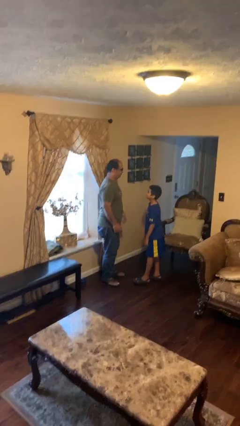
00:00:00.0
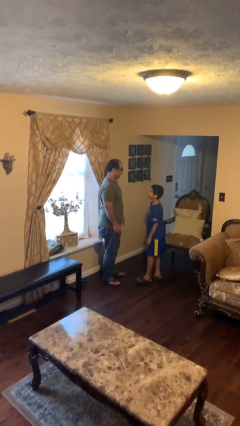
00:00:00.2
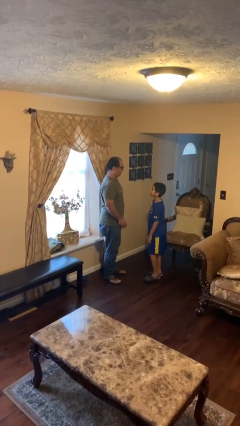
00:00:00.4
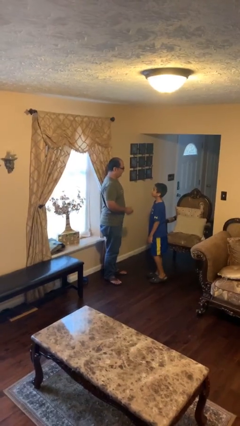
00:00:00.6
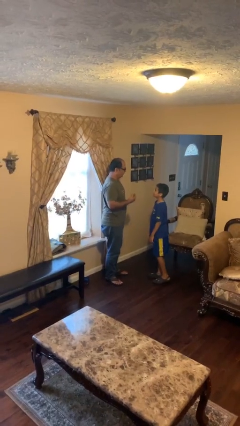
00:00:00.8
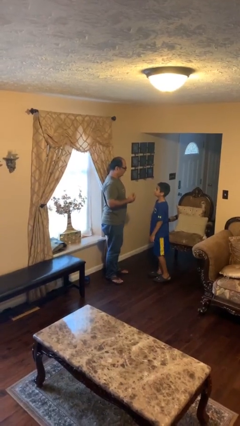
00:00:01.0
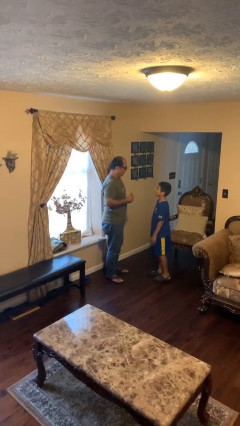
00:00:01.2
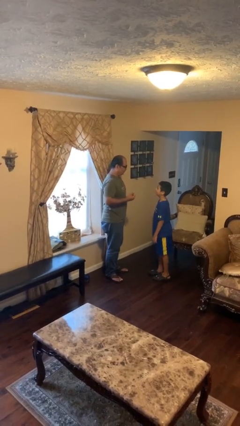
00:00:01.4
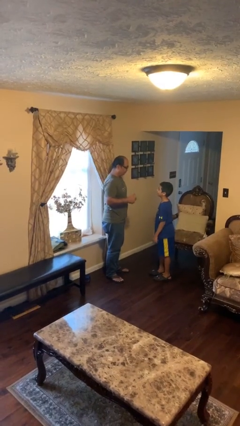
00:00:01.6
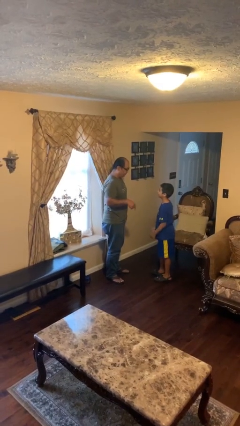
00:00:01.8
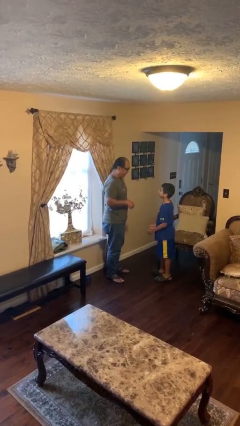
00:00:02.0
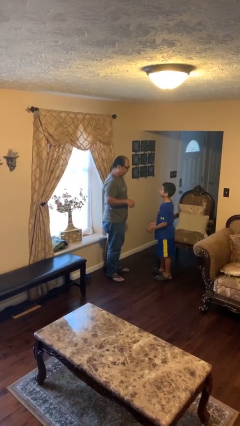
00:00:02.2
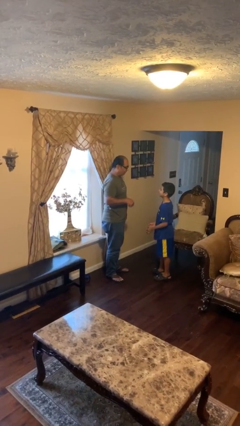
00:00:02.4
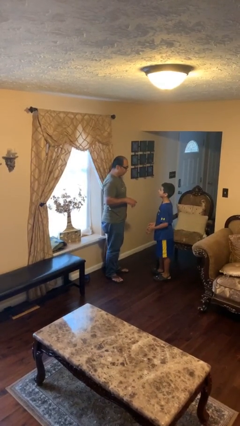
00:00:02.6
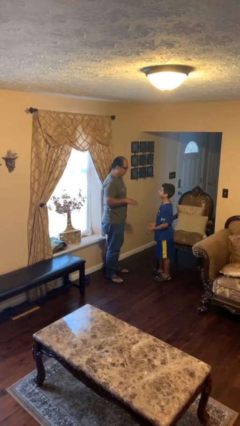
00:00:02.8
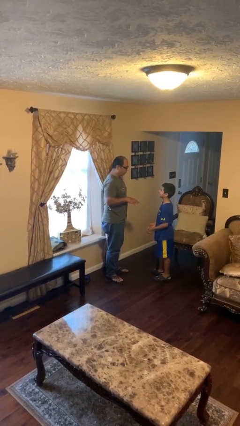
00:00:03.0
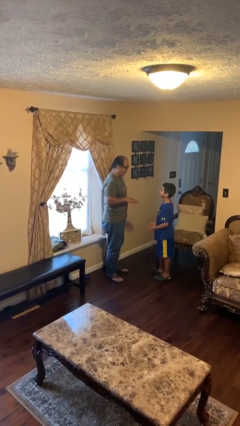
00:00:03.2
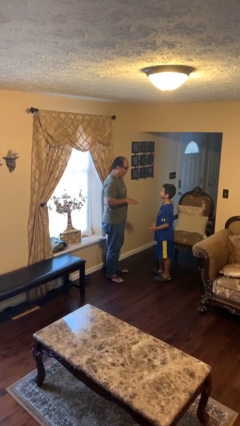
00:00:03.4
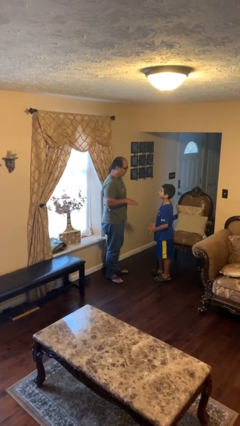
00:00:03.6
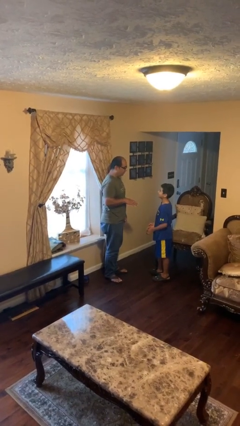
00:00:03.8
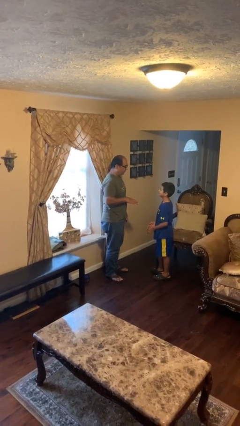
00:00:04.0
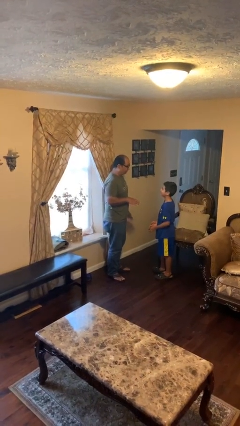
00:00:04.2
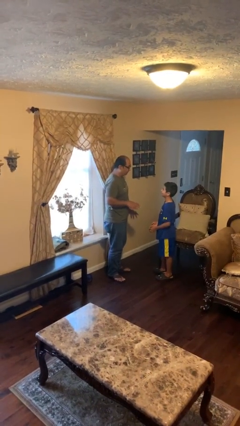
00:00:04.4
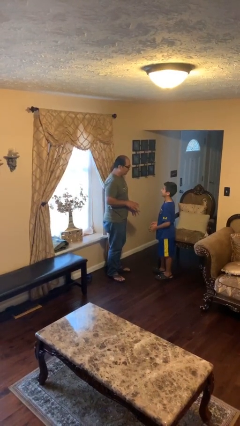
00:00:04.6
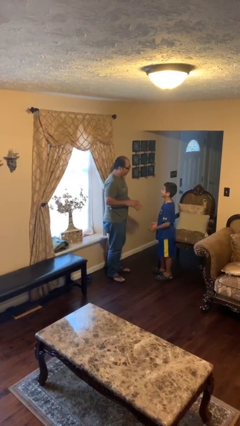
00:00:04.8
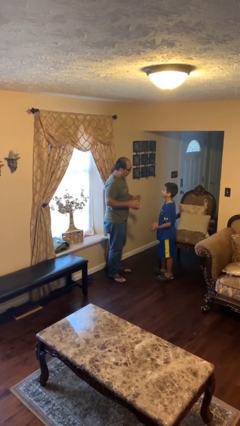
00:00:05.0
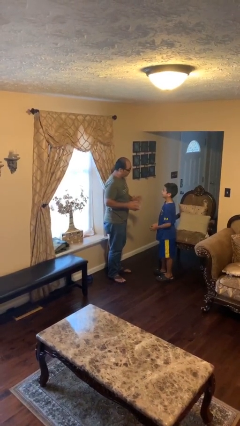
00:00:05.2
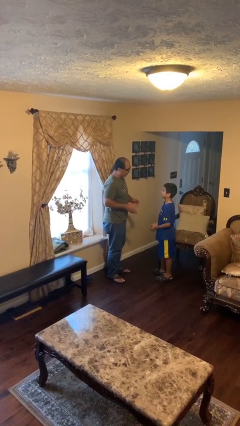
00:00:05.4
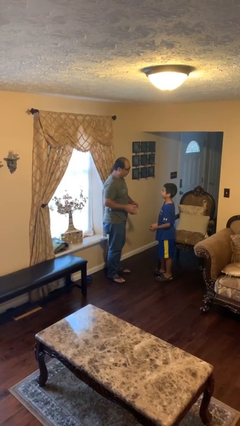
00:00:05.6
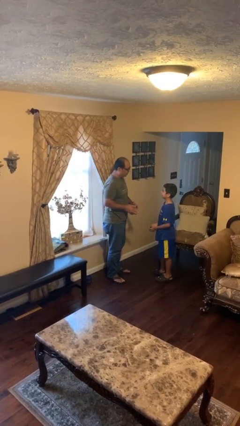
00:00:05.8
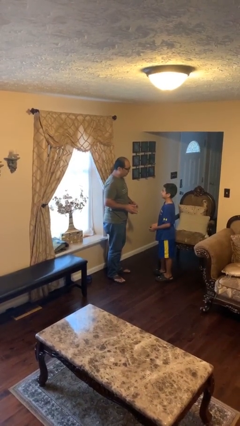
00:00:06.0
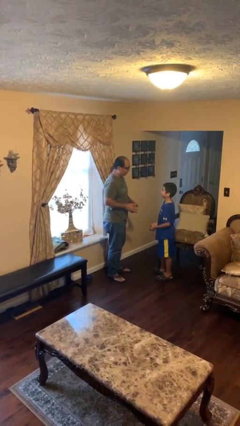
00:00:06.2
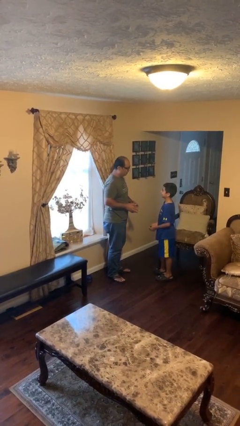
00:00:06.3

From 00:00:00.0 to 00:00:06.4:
person talks to person

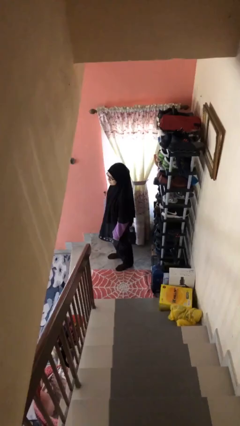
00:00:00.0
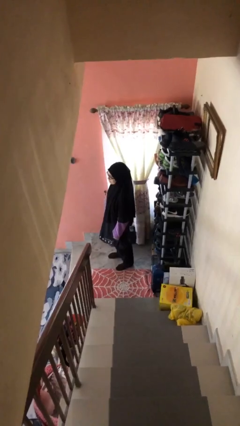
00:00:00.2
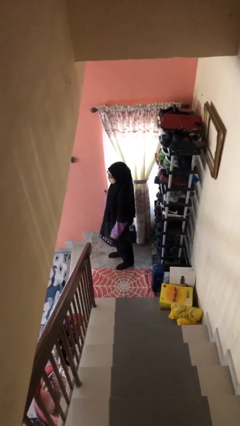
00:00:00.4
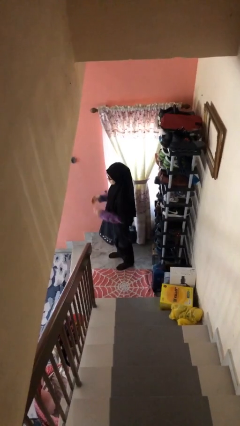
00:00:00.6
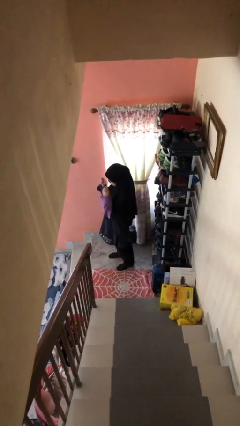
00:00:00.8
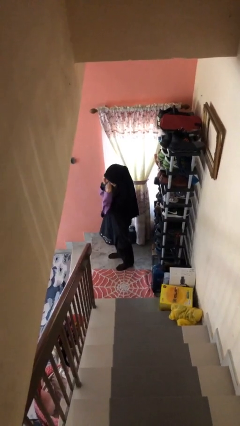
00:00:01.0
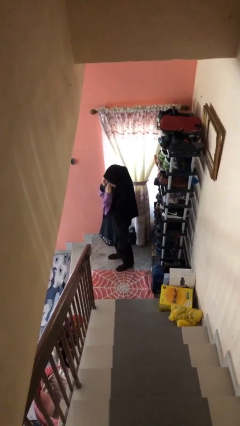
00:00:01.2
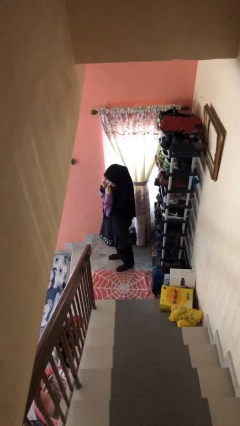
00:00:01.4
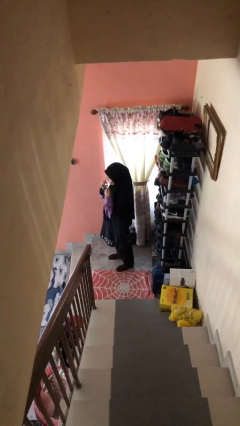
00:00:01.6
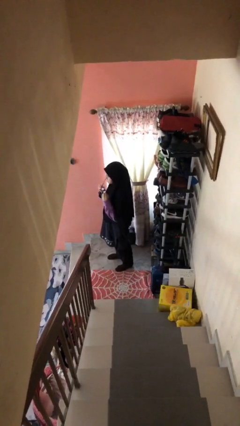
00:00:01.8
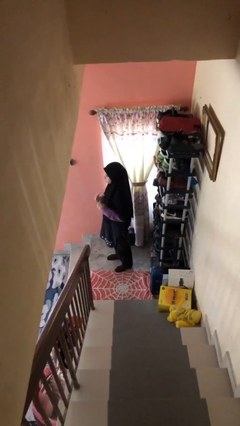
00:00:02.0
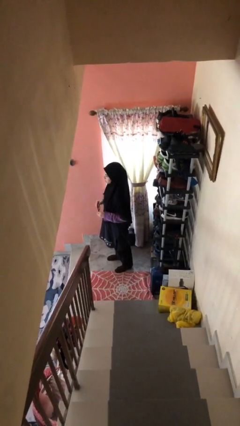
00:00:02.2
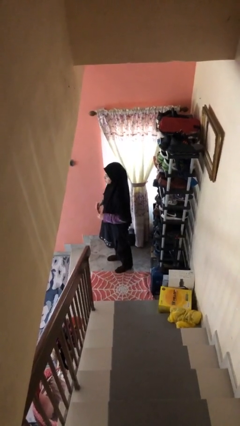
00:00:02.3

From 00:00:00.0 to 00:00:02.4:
person takes off glasses

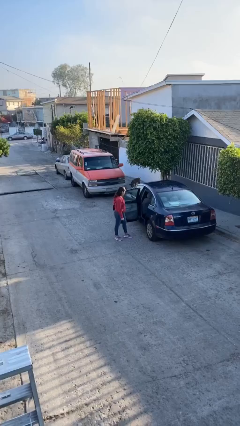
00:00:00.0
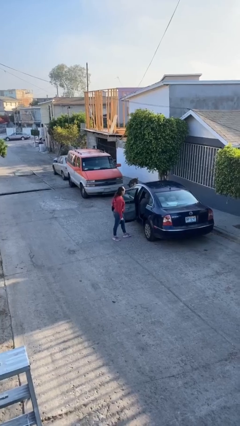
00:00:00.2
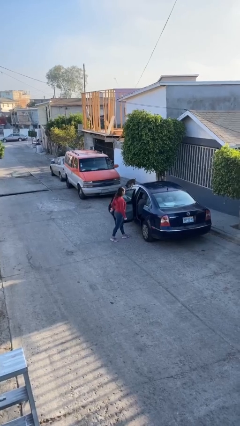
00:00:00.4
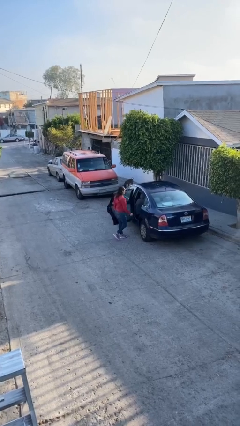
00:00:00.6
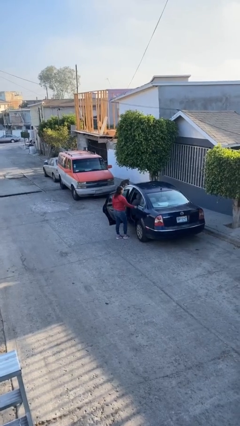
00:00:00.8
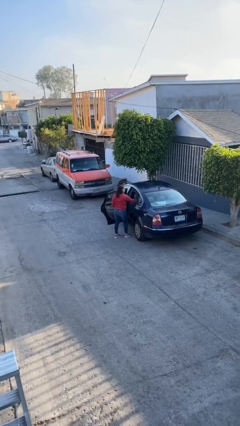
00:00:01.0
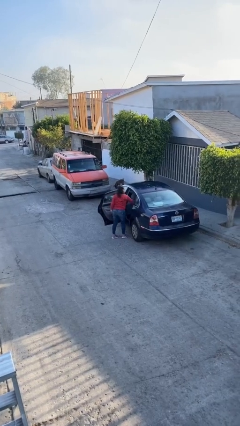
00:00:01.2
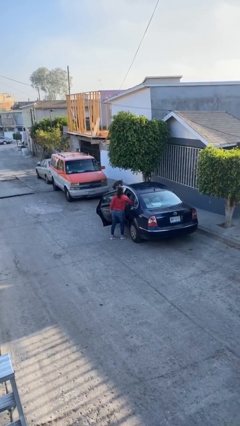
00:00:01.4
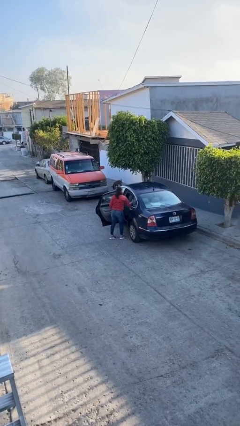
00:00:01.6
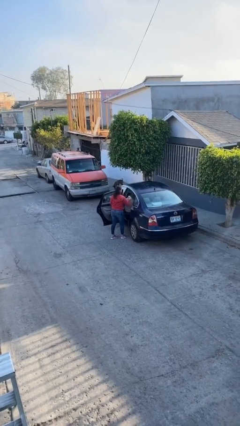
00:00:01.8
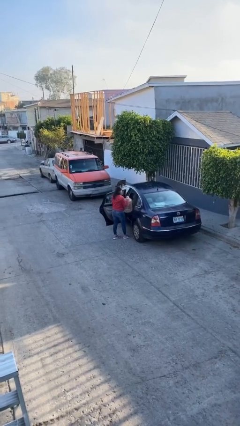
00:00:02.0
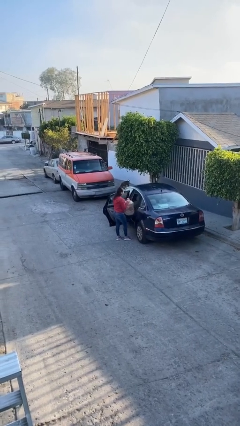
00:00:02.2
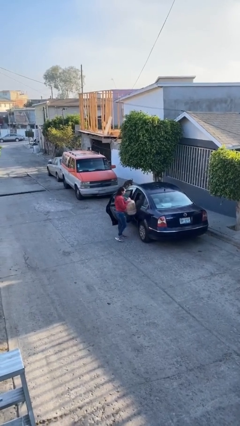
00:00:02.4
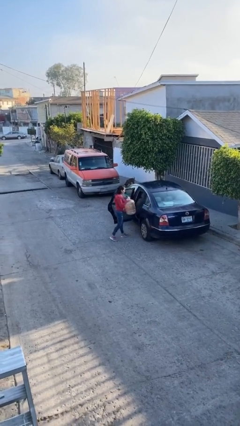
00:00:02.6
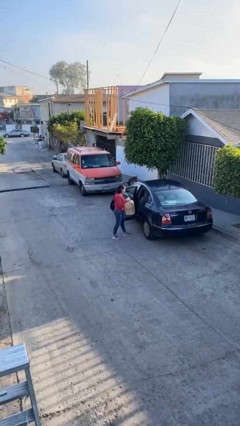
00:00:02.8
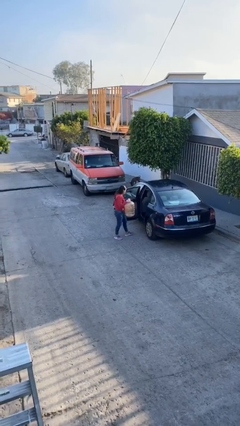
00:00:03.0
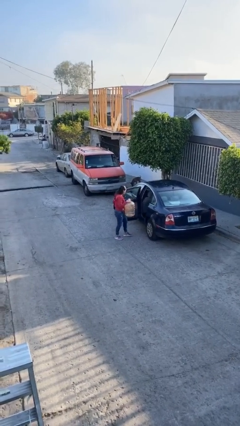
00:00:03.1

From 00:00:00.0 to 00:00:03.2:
person unloads car

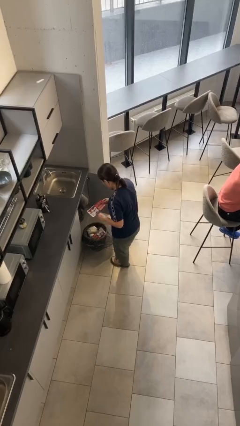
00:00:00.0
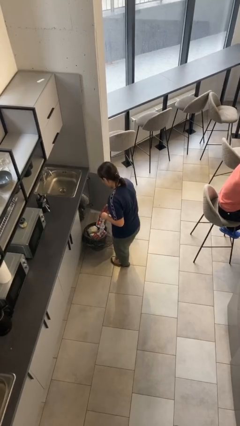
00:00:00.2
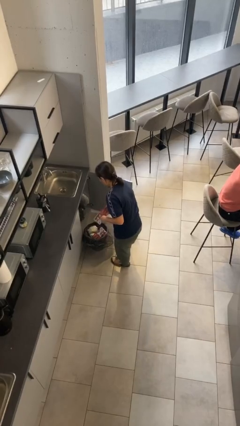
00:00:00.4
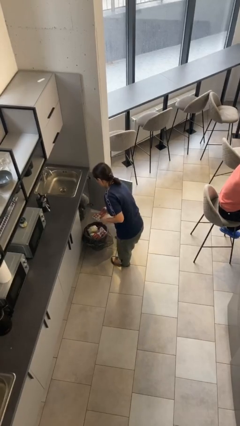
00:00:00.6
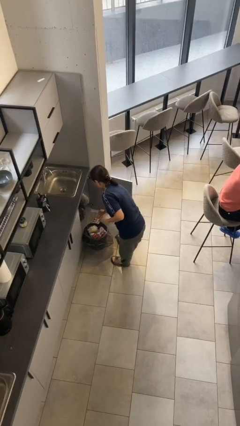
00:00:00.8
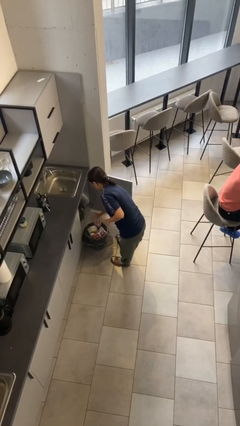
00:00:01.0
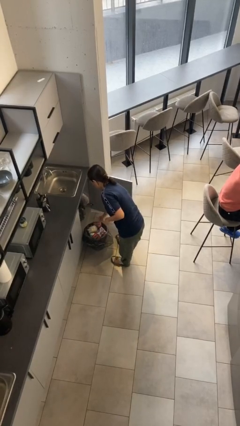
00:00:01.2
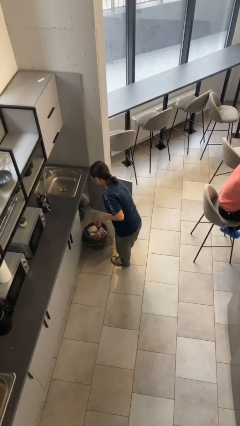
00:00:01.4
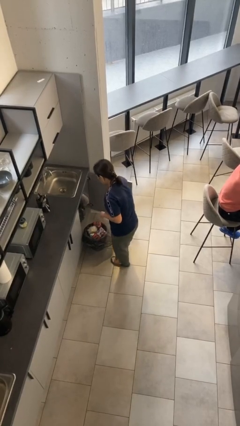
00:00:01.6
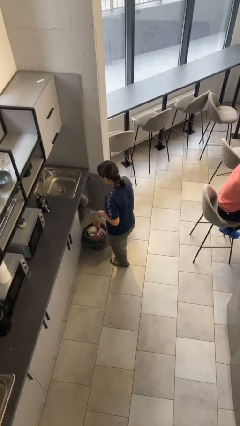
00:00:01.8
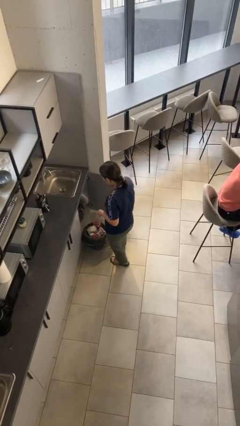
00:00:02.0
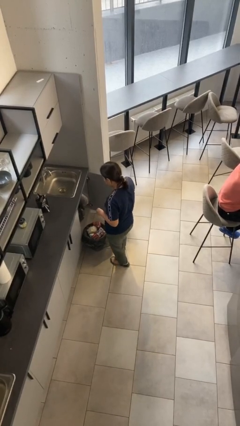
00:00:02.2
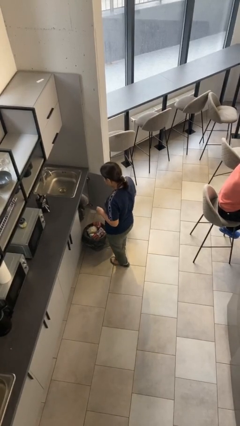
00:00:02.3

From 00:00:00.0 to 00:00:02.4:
person discards trash

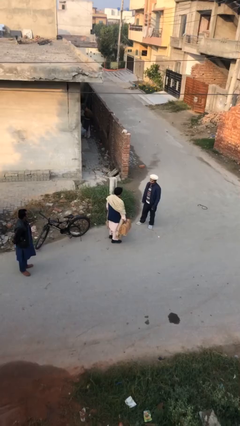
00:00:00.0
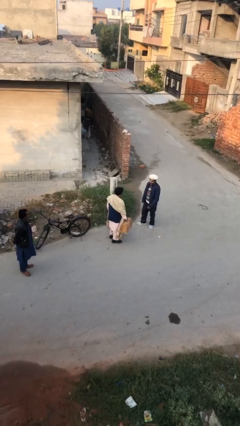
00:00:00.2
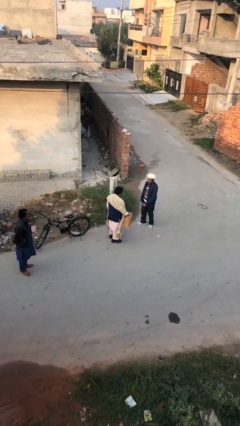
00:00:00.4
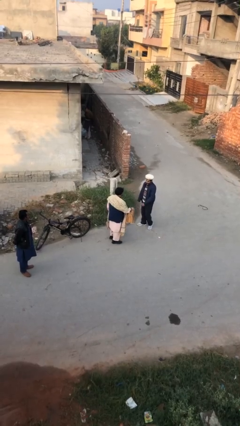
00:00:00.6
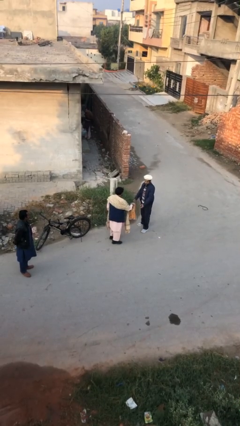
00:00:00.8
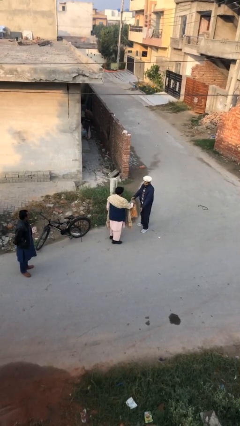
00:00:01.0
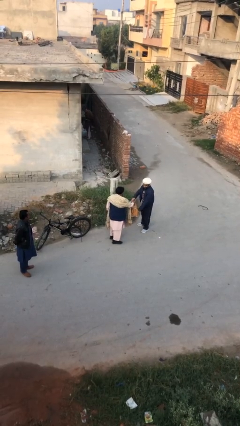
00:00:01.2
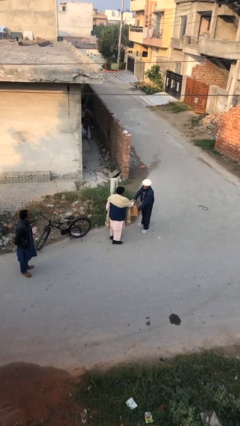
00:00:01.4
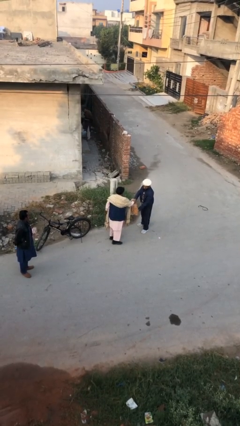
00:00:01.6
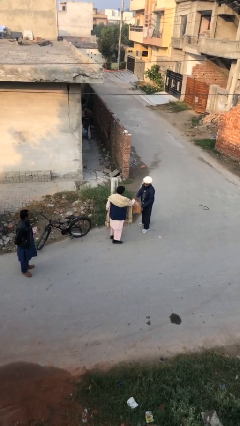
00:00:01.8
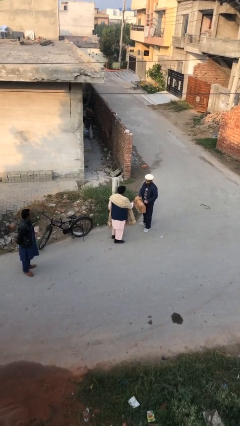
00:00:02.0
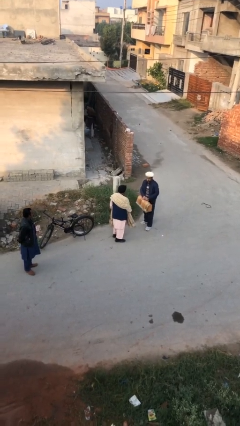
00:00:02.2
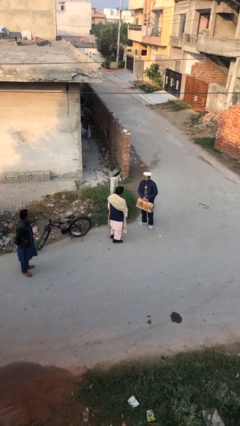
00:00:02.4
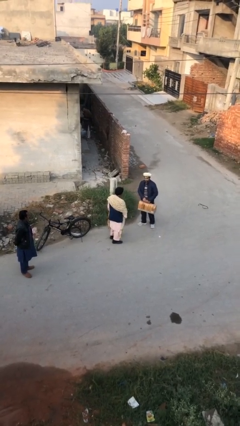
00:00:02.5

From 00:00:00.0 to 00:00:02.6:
person transfers object to person

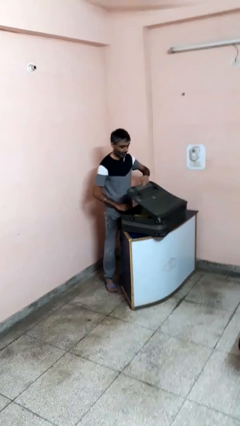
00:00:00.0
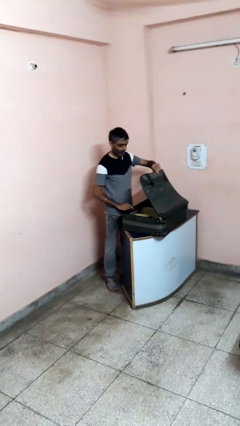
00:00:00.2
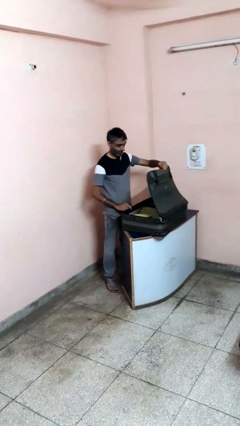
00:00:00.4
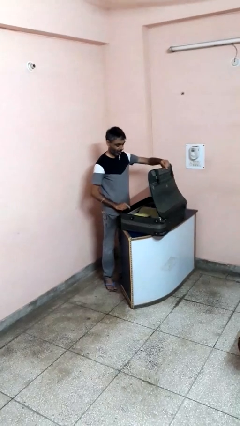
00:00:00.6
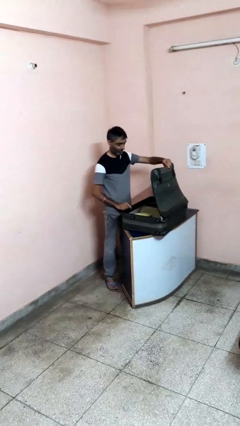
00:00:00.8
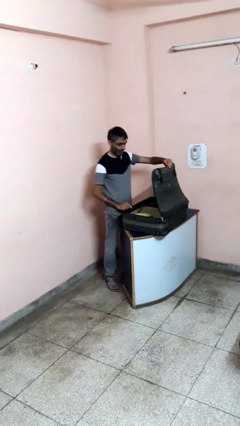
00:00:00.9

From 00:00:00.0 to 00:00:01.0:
person opens suitcase
